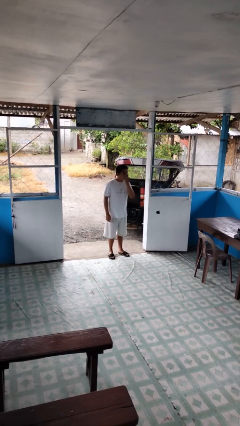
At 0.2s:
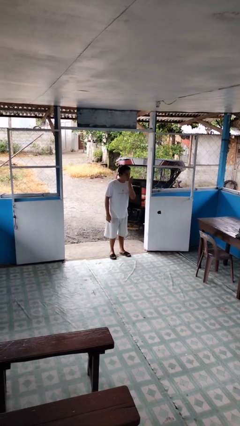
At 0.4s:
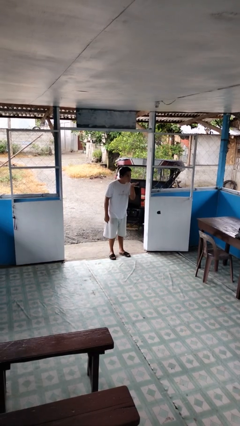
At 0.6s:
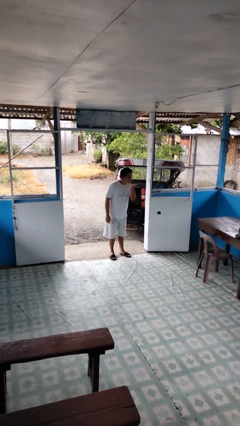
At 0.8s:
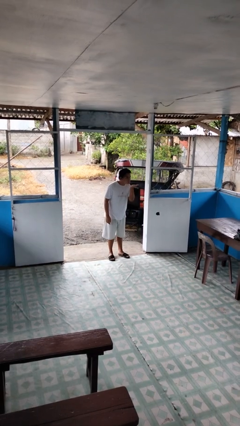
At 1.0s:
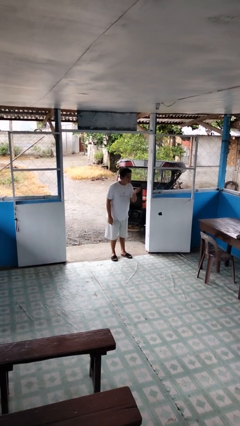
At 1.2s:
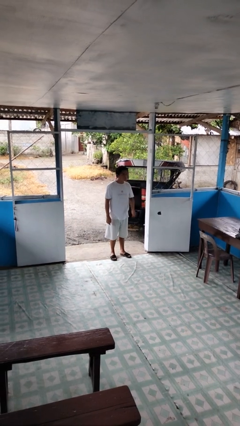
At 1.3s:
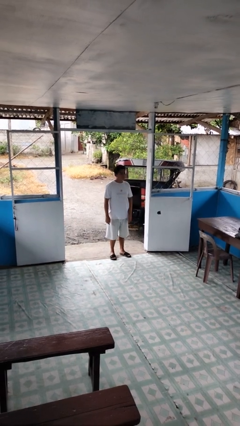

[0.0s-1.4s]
person gestures blow kiss

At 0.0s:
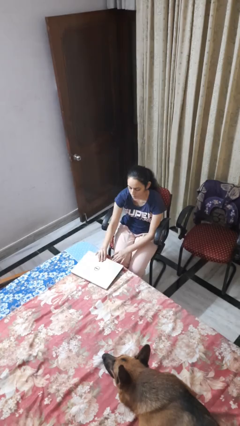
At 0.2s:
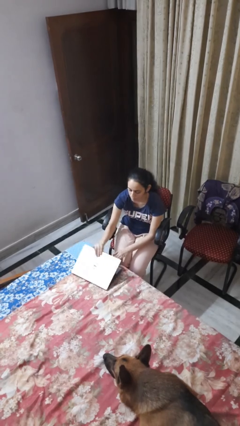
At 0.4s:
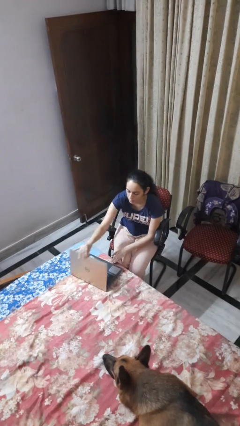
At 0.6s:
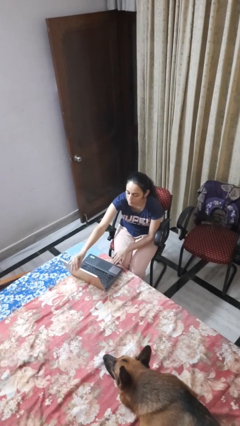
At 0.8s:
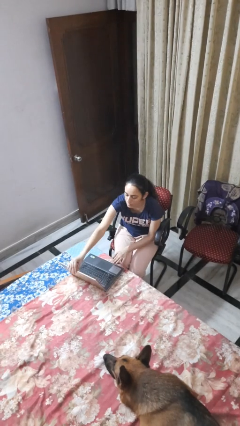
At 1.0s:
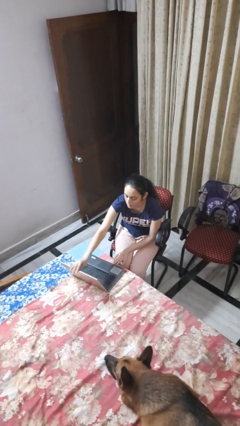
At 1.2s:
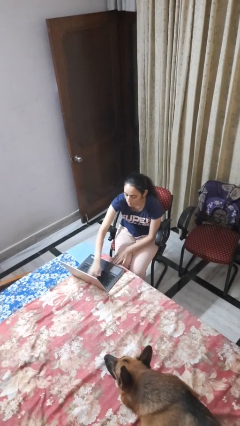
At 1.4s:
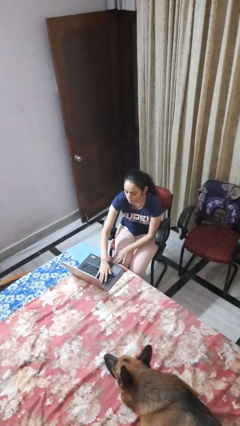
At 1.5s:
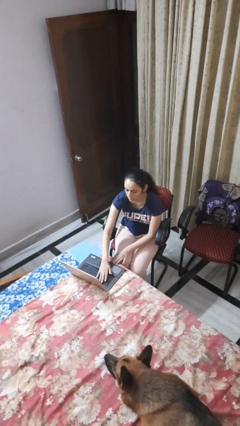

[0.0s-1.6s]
person opens laptop

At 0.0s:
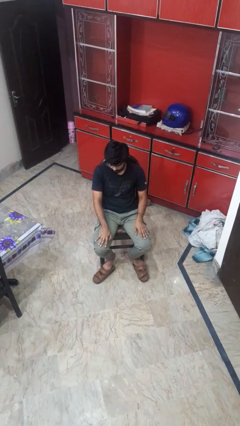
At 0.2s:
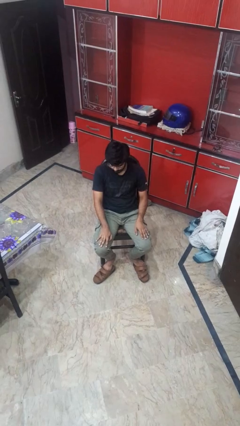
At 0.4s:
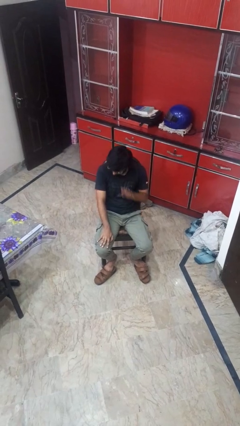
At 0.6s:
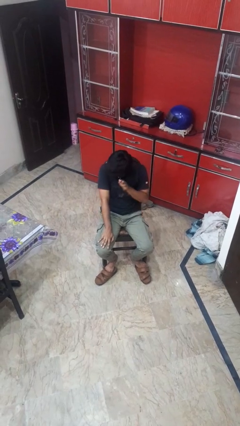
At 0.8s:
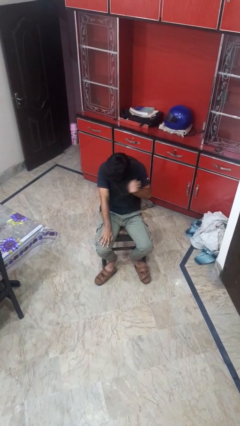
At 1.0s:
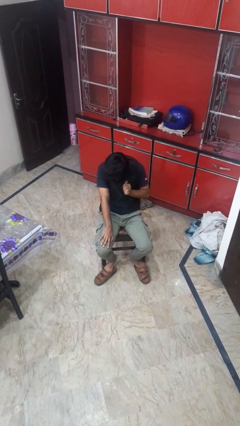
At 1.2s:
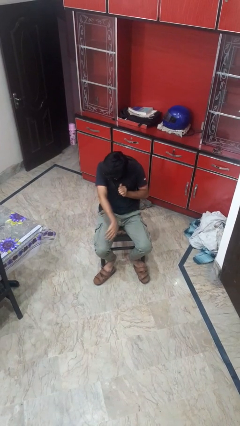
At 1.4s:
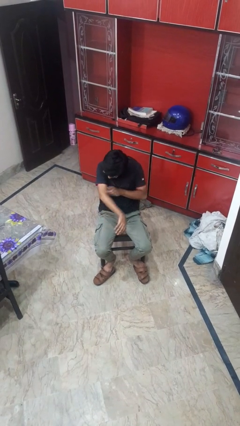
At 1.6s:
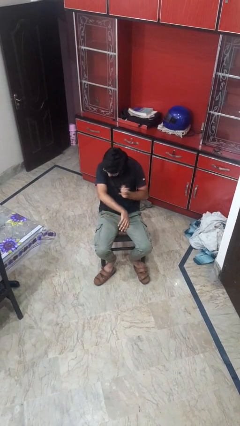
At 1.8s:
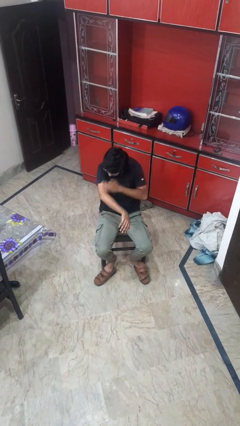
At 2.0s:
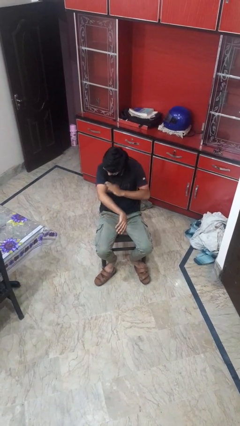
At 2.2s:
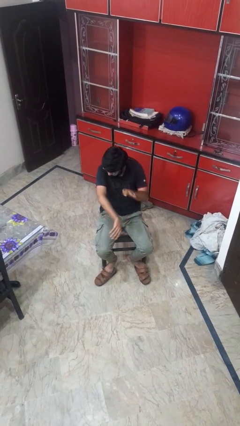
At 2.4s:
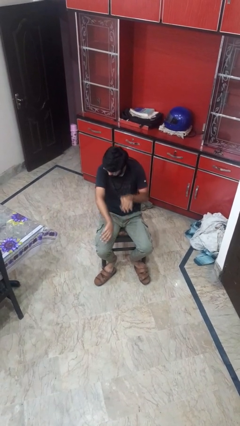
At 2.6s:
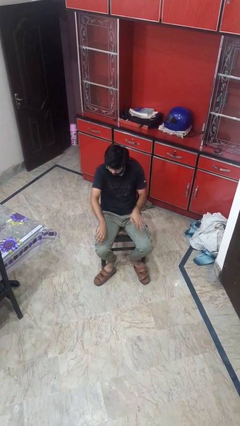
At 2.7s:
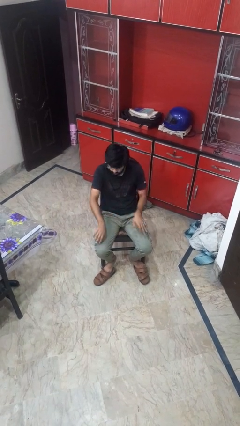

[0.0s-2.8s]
person swats bug

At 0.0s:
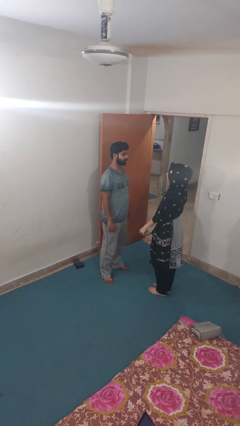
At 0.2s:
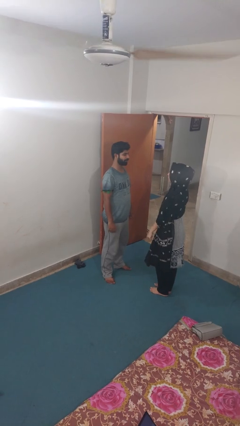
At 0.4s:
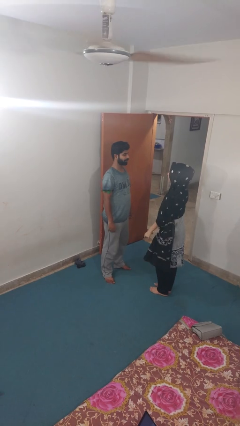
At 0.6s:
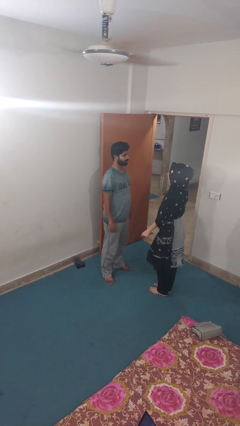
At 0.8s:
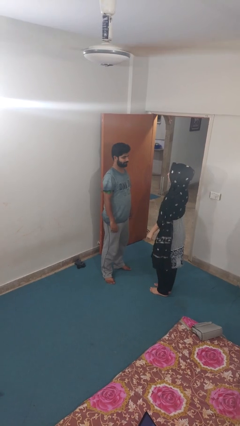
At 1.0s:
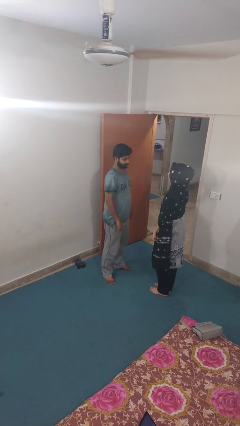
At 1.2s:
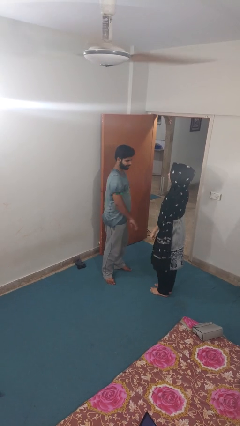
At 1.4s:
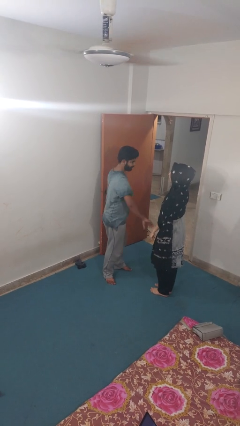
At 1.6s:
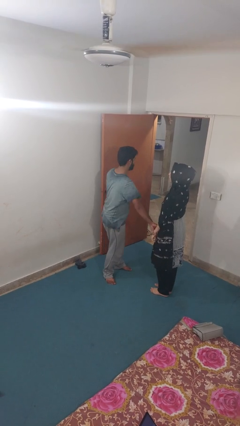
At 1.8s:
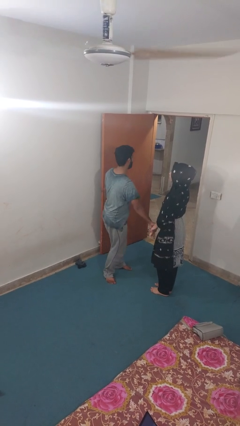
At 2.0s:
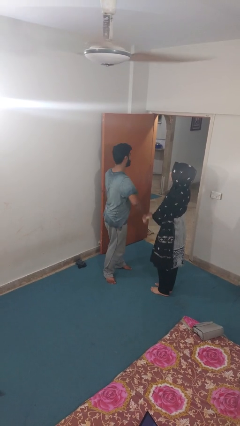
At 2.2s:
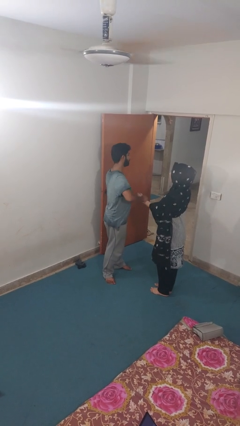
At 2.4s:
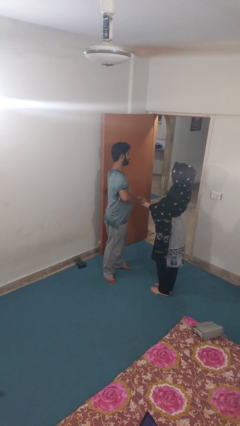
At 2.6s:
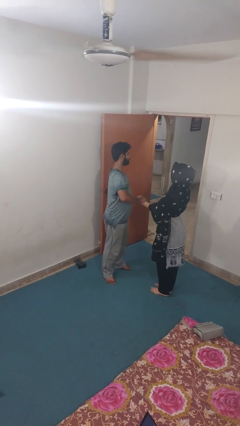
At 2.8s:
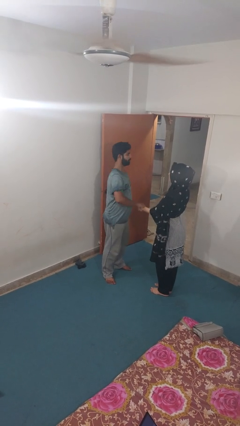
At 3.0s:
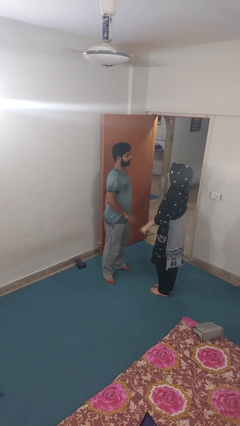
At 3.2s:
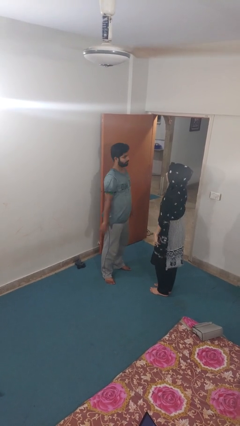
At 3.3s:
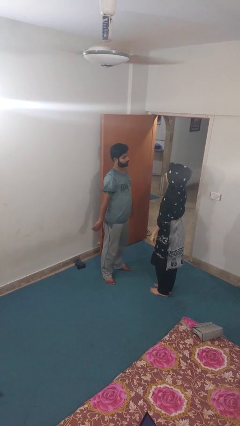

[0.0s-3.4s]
person grabs person by forearm

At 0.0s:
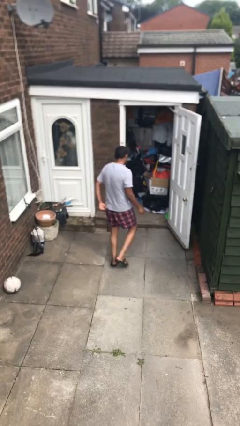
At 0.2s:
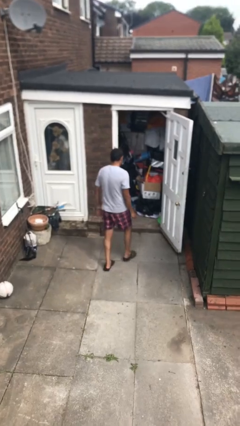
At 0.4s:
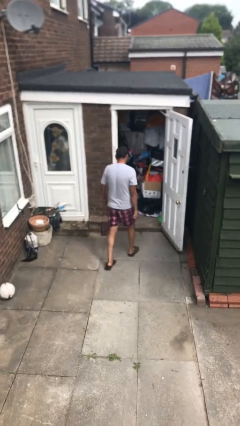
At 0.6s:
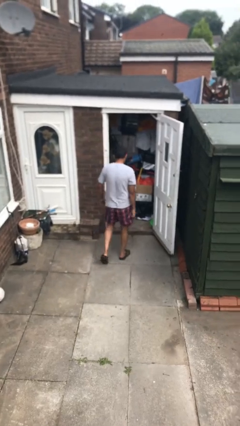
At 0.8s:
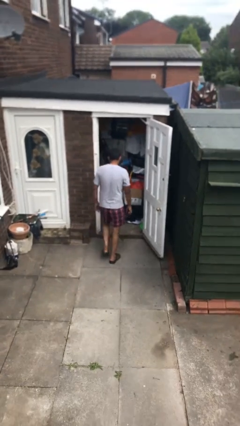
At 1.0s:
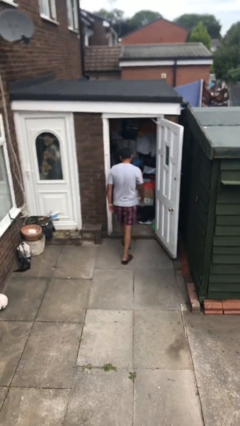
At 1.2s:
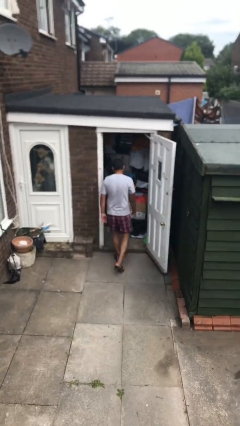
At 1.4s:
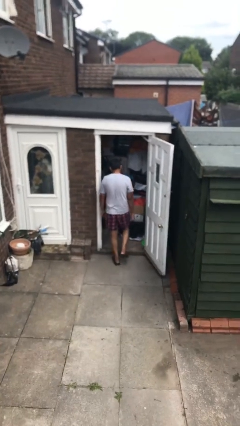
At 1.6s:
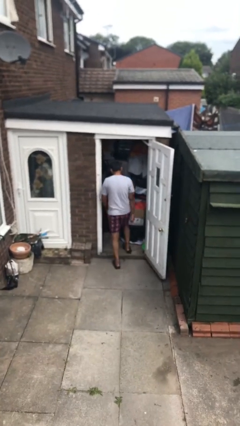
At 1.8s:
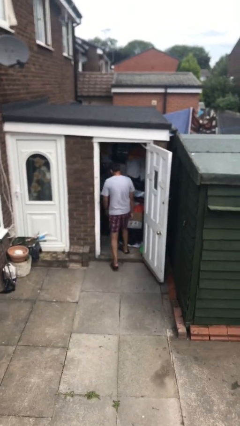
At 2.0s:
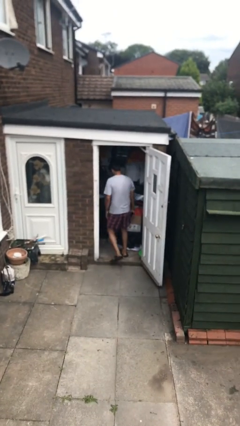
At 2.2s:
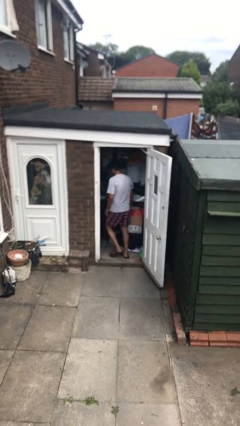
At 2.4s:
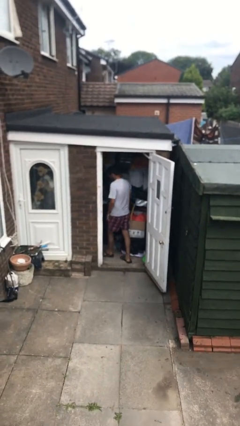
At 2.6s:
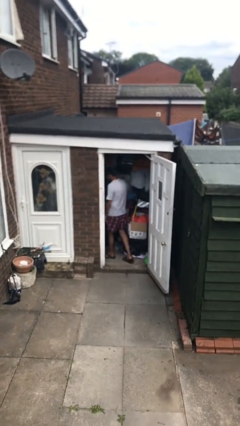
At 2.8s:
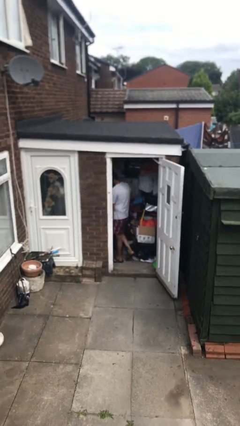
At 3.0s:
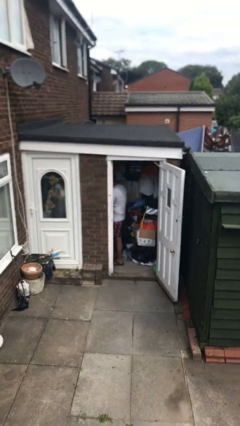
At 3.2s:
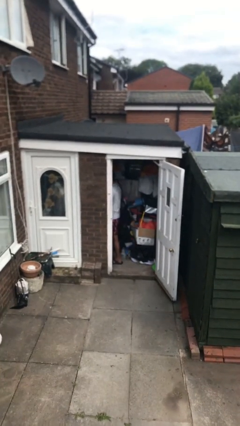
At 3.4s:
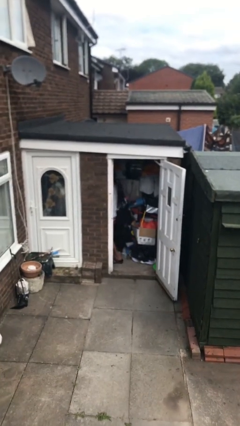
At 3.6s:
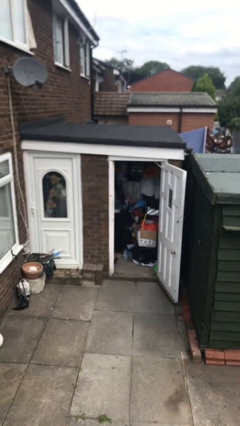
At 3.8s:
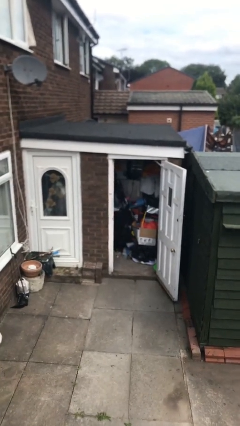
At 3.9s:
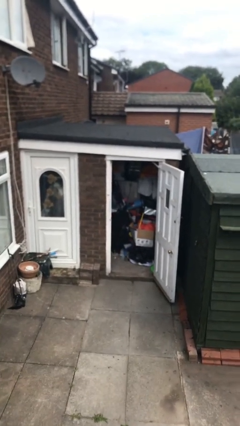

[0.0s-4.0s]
person exits scene through structure

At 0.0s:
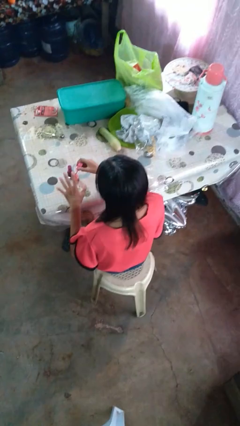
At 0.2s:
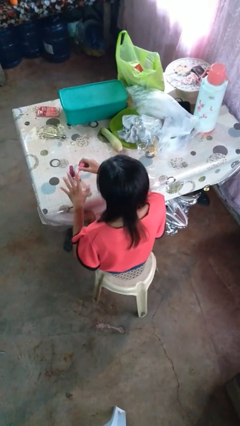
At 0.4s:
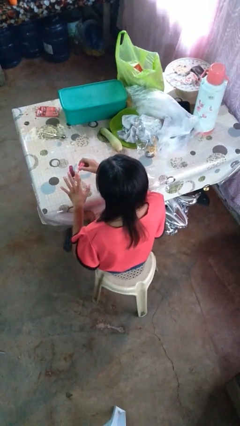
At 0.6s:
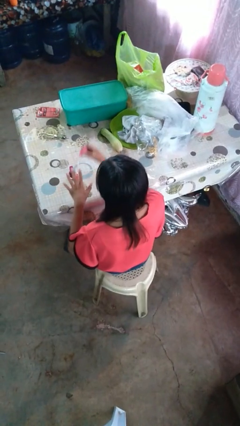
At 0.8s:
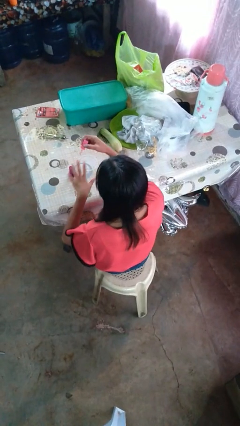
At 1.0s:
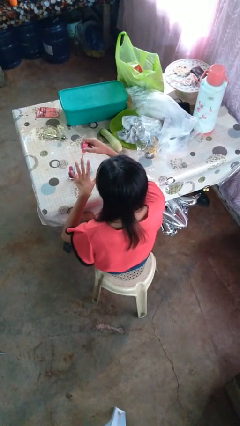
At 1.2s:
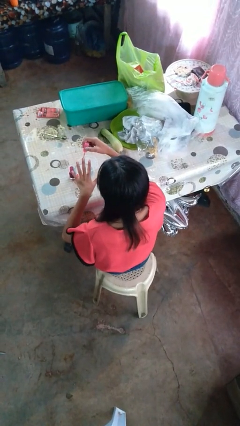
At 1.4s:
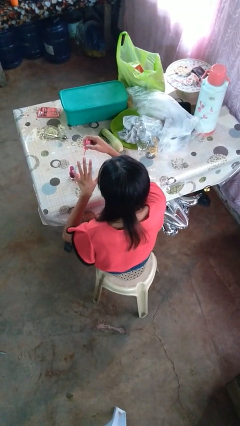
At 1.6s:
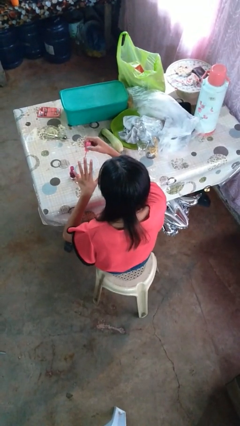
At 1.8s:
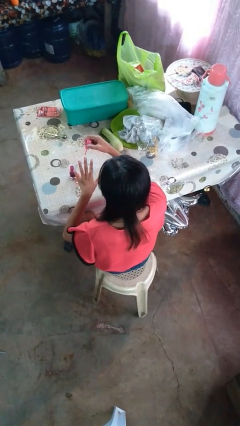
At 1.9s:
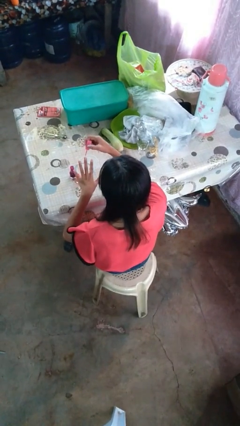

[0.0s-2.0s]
person paints fingernails

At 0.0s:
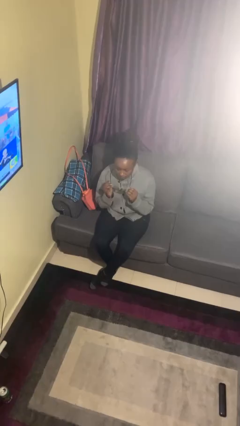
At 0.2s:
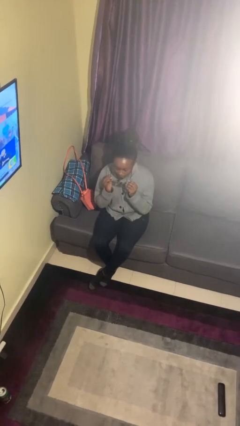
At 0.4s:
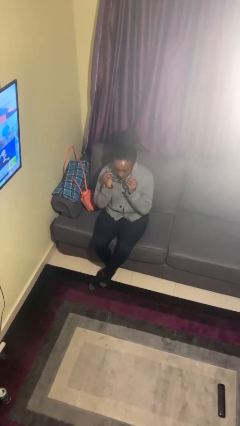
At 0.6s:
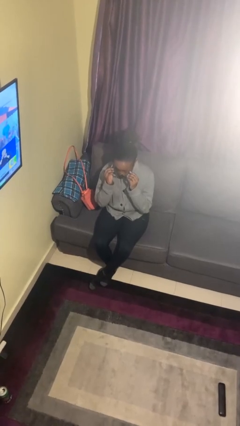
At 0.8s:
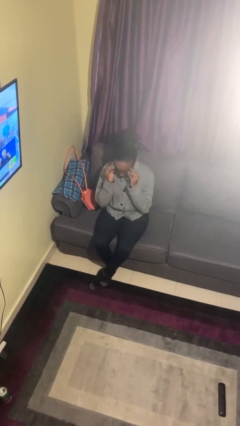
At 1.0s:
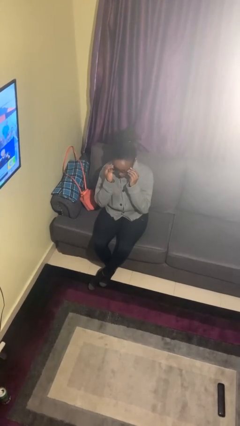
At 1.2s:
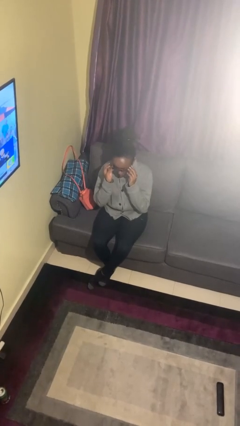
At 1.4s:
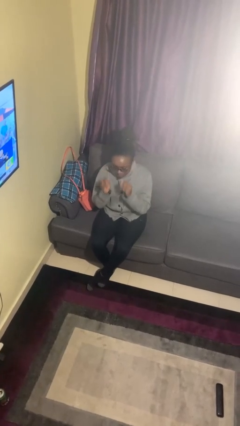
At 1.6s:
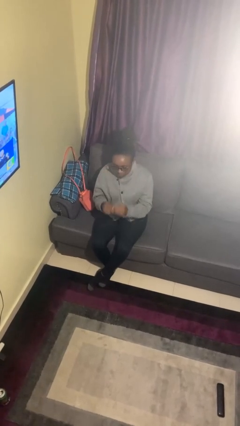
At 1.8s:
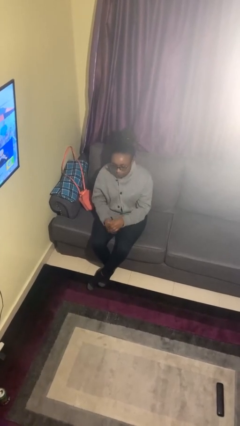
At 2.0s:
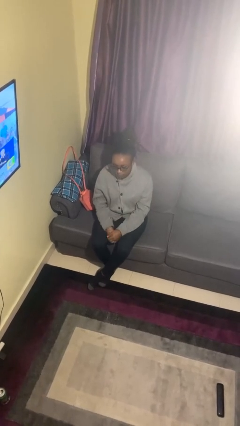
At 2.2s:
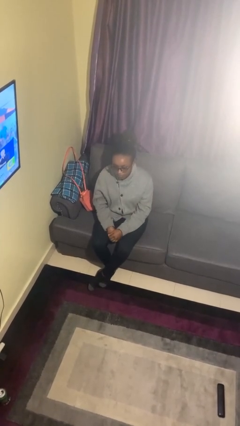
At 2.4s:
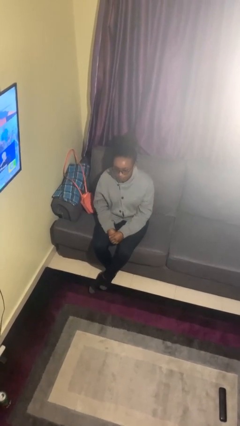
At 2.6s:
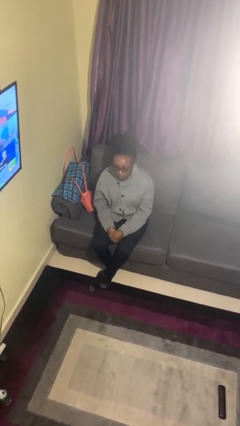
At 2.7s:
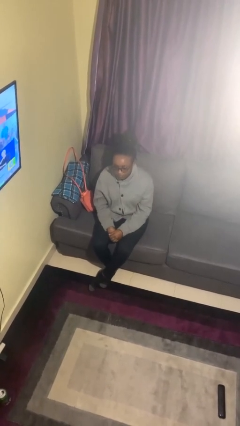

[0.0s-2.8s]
person puts on glasses
